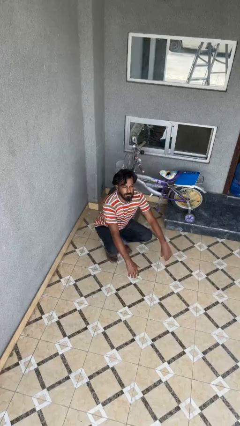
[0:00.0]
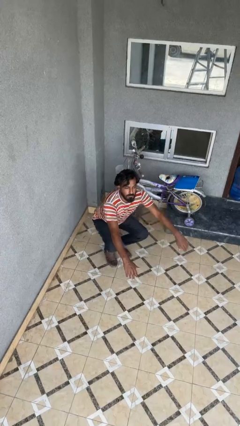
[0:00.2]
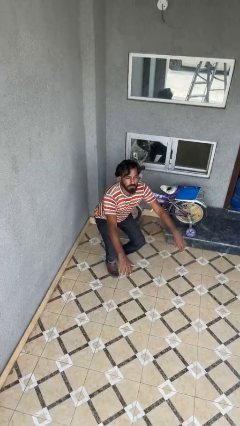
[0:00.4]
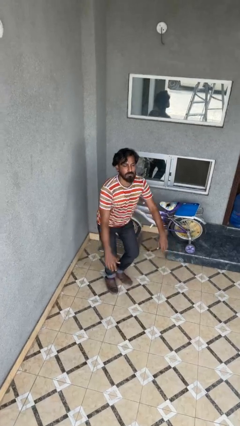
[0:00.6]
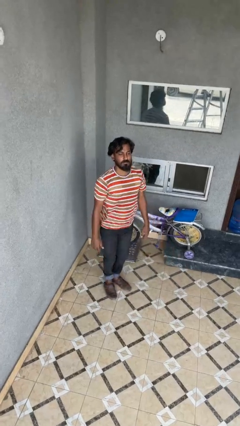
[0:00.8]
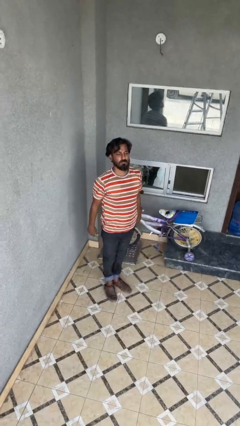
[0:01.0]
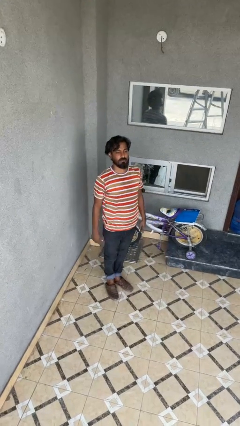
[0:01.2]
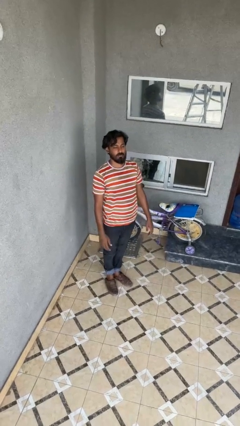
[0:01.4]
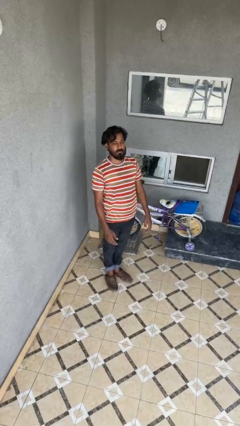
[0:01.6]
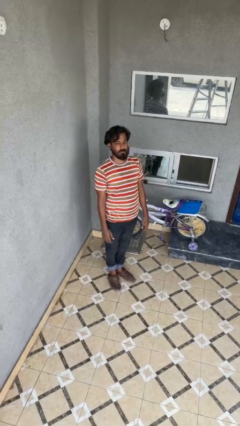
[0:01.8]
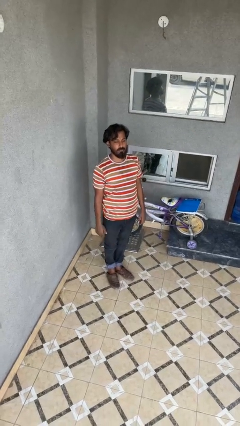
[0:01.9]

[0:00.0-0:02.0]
person stands up

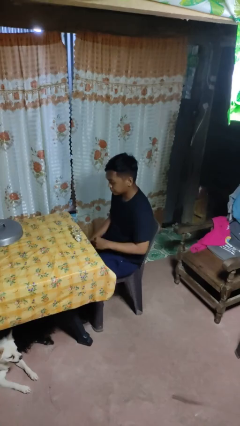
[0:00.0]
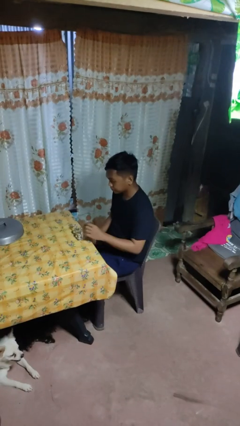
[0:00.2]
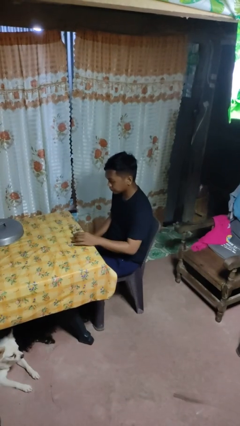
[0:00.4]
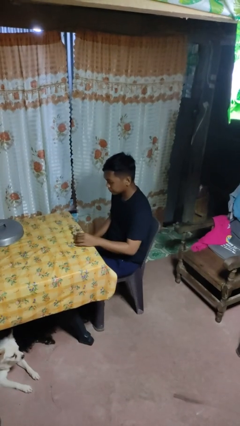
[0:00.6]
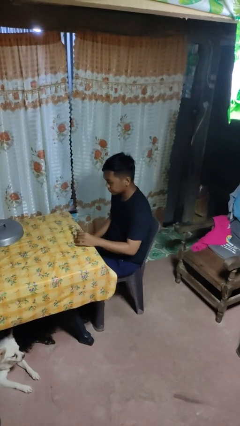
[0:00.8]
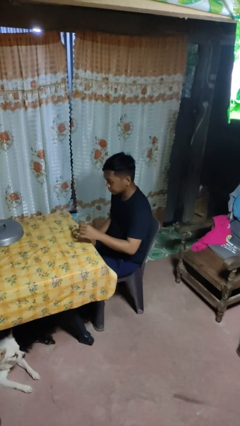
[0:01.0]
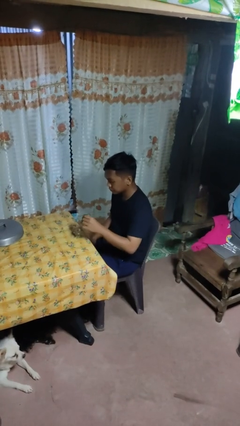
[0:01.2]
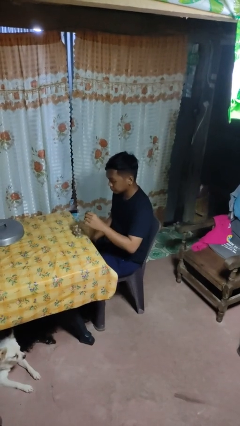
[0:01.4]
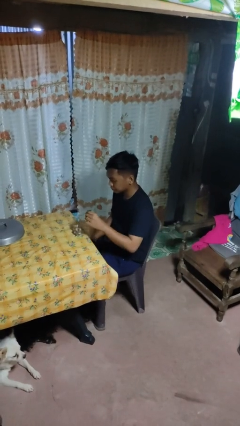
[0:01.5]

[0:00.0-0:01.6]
person picks up object from table

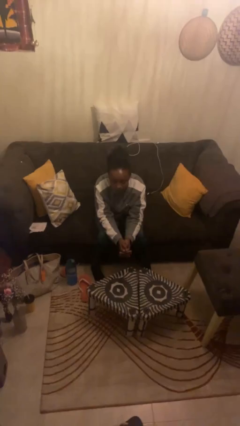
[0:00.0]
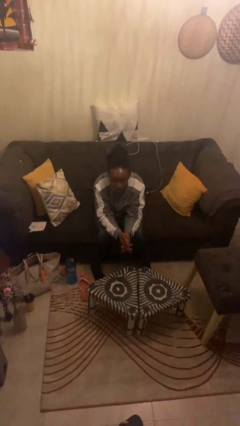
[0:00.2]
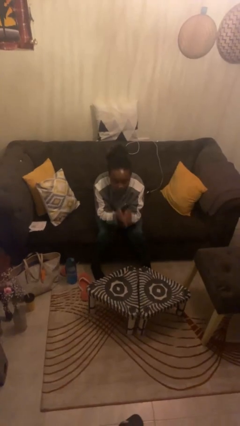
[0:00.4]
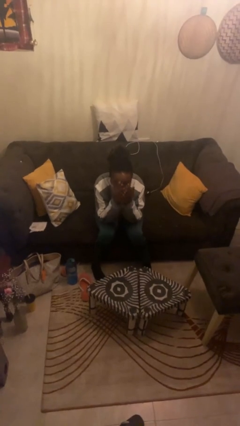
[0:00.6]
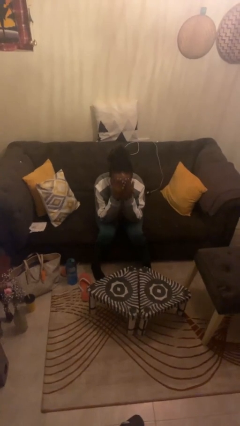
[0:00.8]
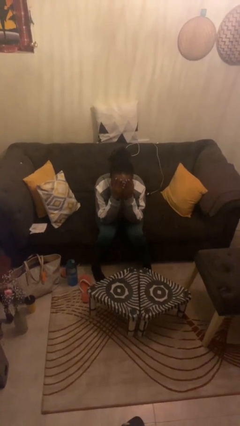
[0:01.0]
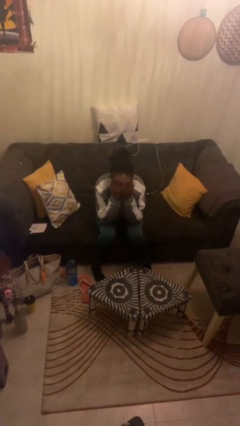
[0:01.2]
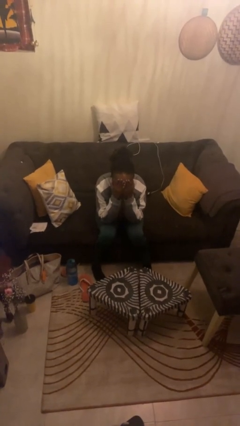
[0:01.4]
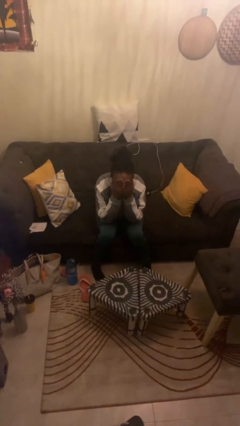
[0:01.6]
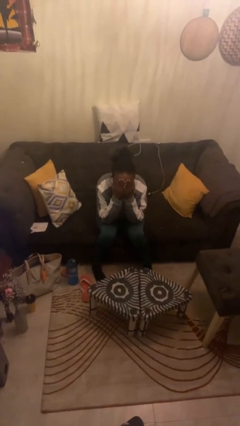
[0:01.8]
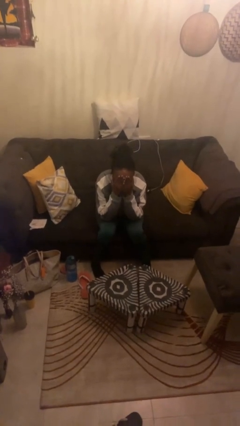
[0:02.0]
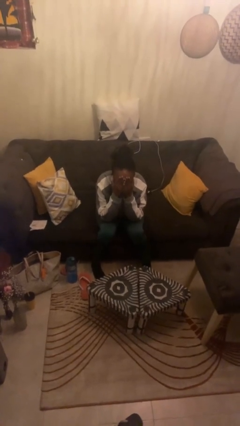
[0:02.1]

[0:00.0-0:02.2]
person covers face with hands

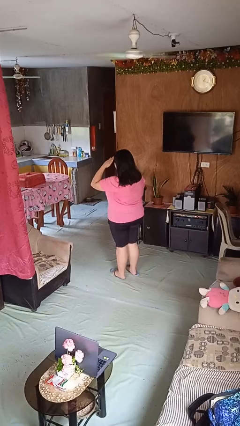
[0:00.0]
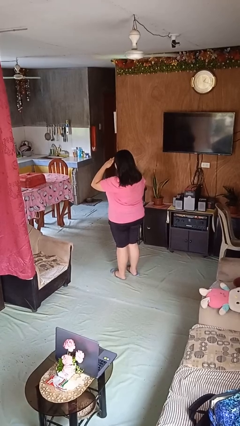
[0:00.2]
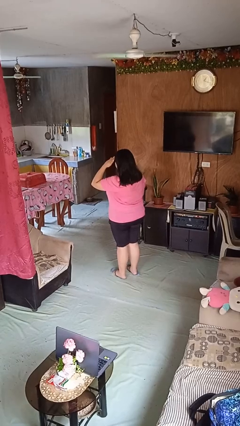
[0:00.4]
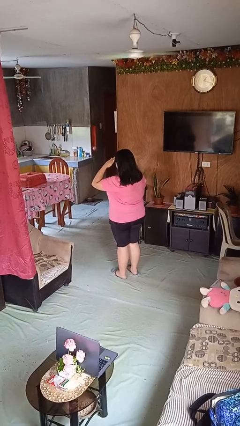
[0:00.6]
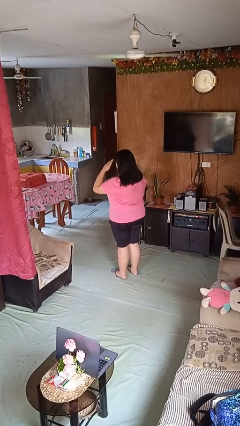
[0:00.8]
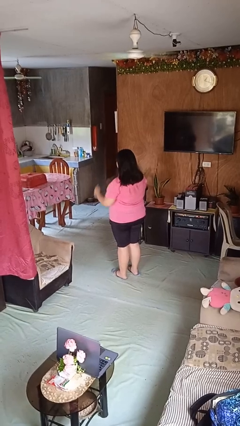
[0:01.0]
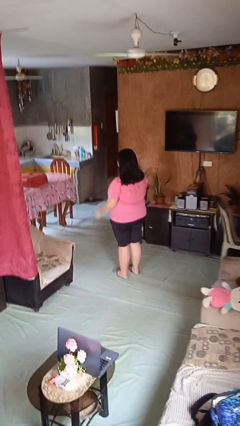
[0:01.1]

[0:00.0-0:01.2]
person salutes

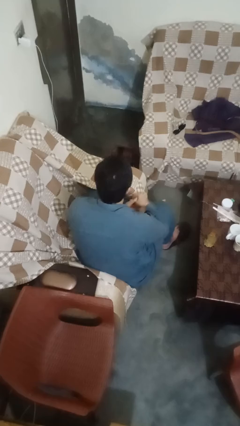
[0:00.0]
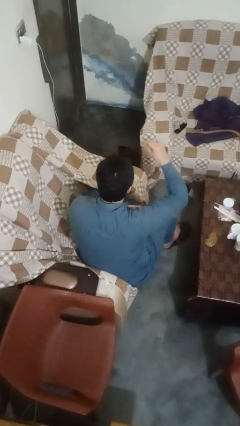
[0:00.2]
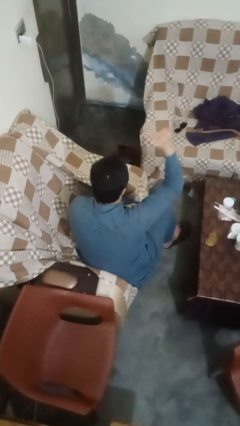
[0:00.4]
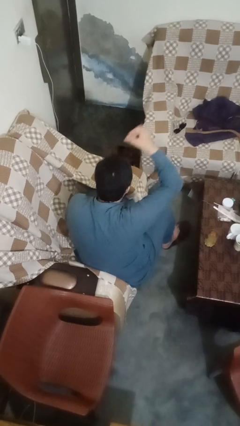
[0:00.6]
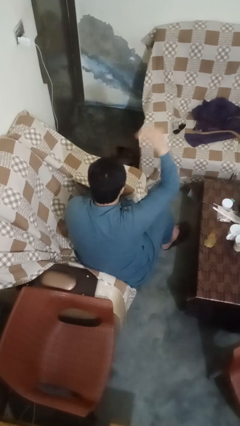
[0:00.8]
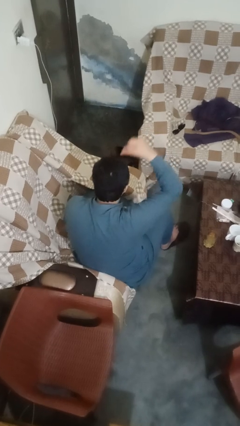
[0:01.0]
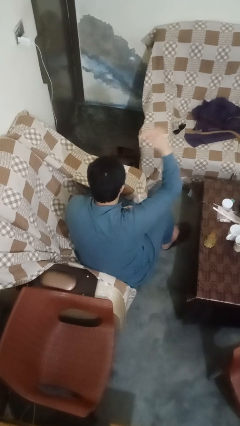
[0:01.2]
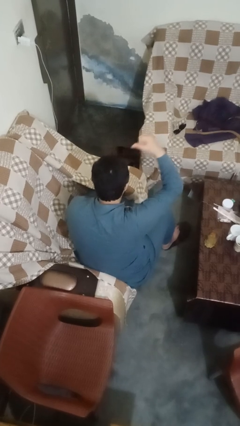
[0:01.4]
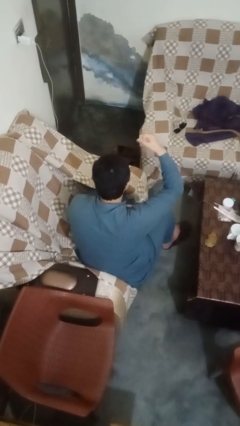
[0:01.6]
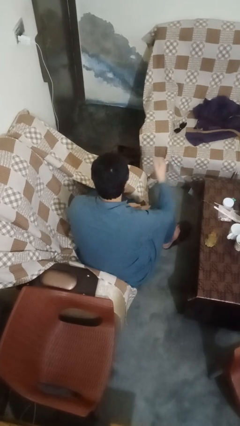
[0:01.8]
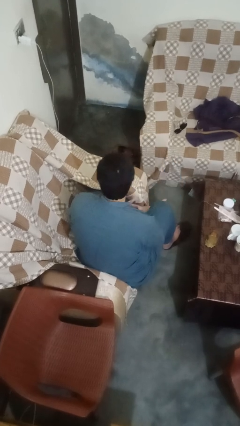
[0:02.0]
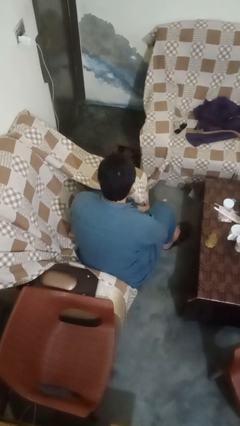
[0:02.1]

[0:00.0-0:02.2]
person snaps fingers

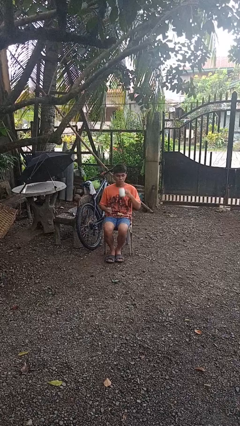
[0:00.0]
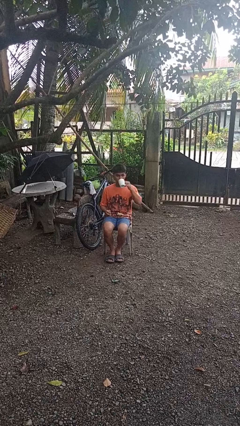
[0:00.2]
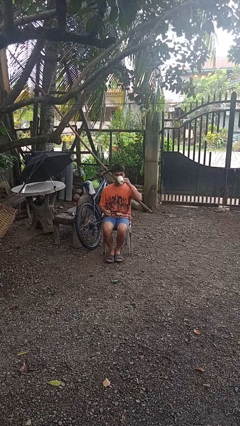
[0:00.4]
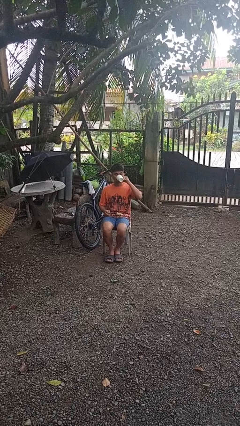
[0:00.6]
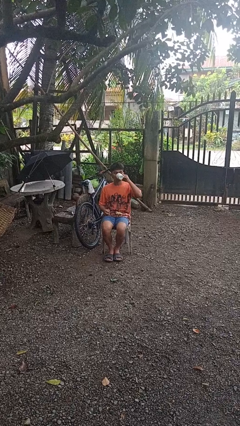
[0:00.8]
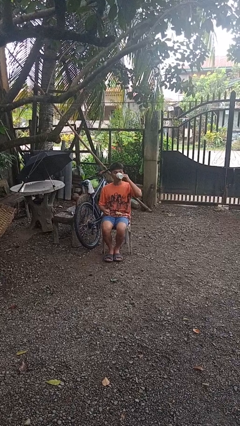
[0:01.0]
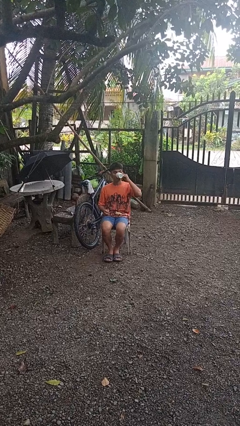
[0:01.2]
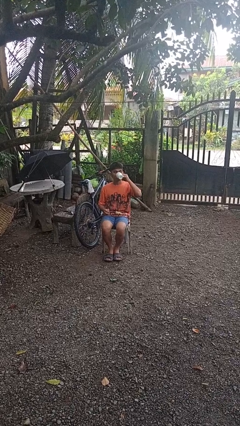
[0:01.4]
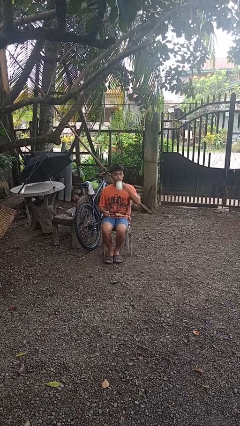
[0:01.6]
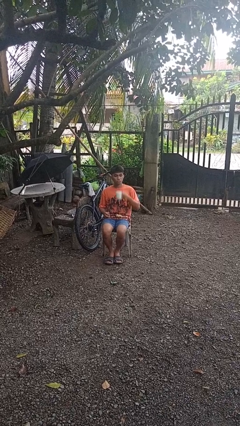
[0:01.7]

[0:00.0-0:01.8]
person drinks from mug

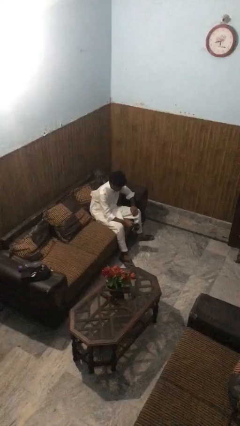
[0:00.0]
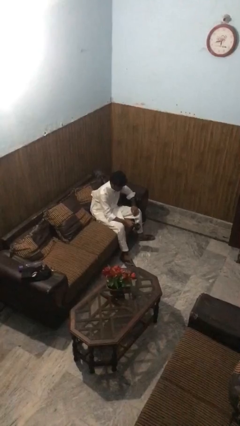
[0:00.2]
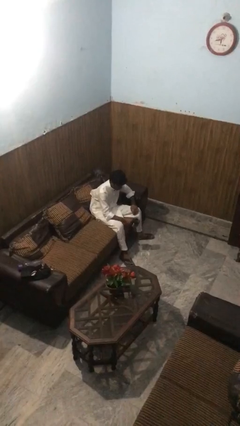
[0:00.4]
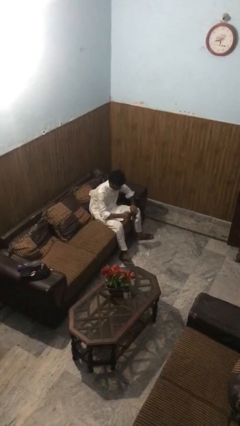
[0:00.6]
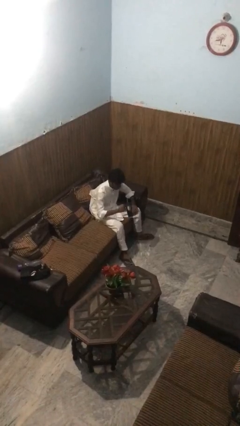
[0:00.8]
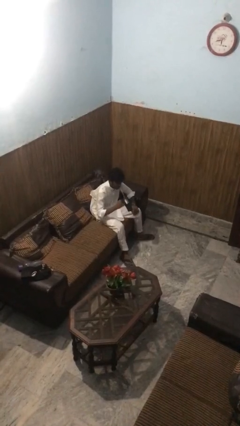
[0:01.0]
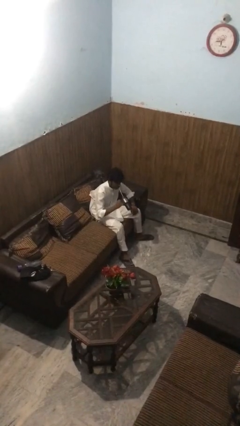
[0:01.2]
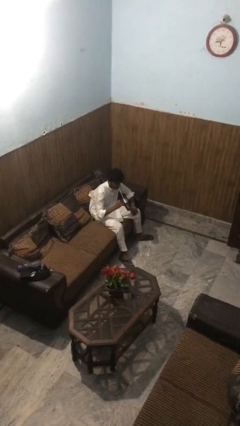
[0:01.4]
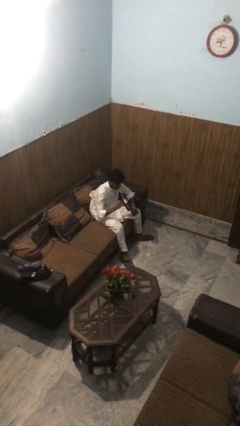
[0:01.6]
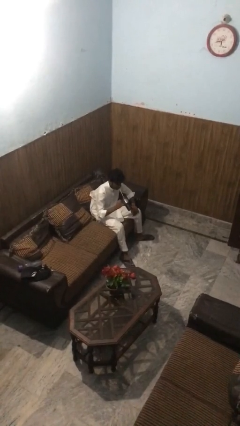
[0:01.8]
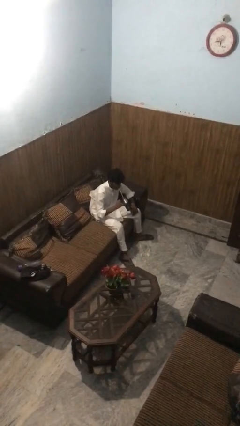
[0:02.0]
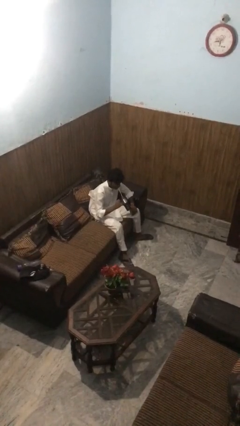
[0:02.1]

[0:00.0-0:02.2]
person drinks from straw

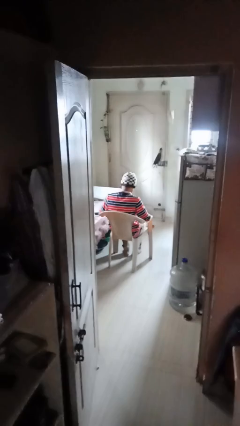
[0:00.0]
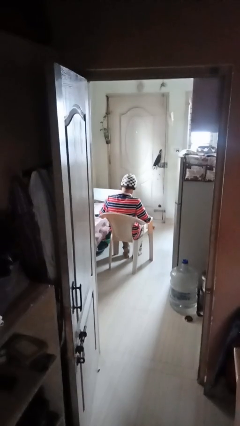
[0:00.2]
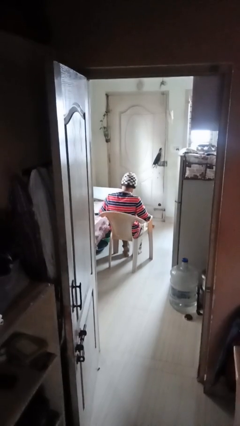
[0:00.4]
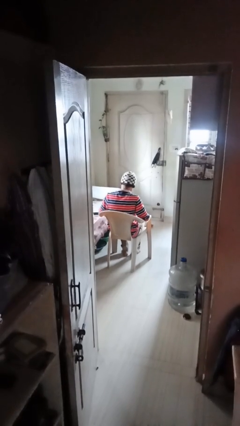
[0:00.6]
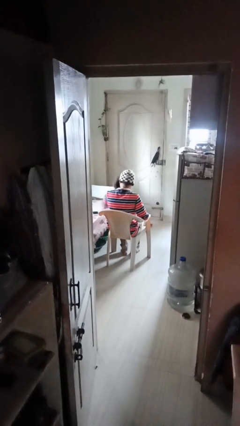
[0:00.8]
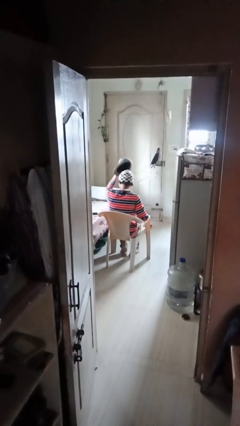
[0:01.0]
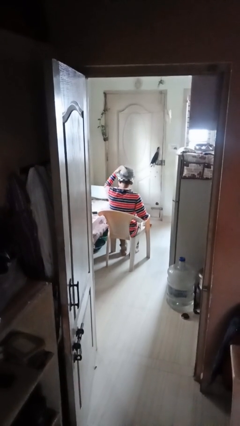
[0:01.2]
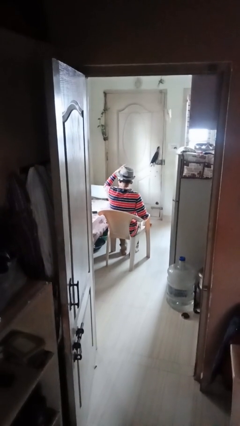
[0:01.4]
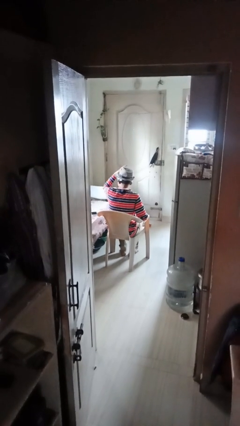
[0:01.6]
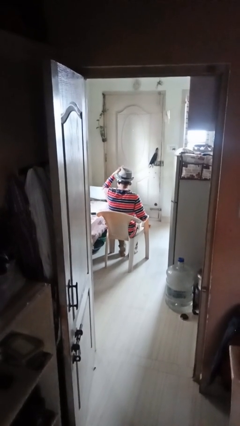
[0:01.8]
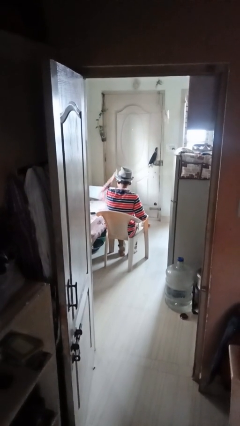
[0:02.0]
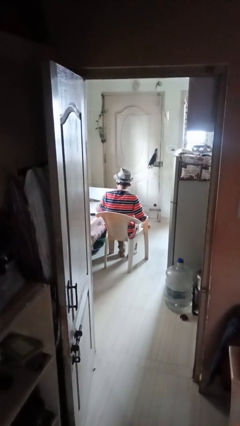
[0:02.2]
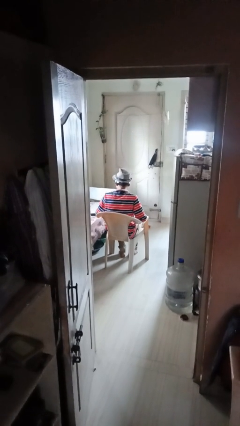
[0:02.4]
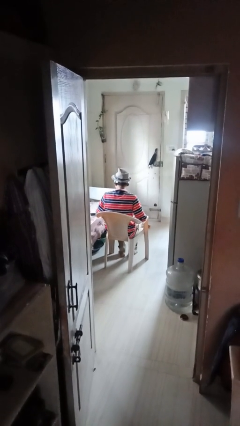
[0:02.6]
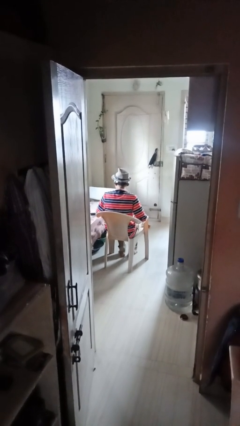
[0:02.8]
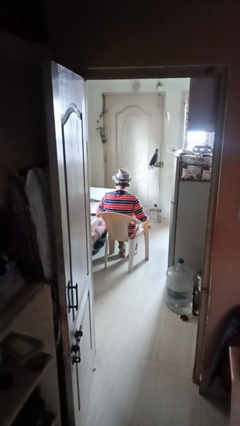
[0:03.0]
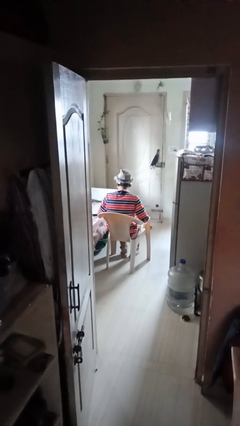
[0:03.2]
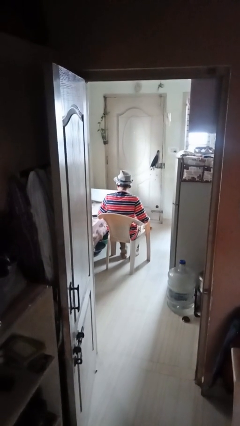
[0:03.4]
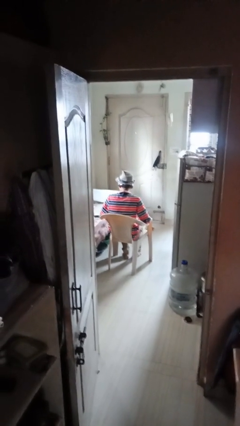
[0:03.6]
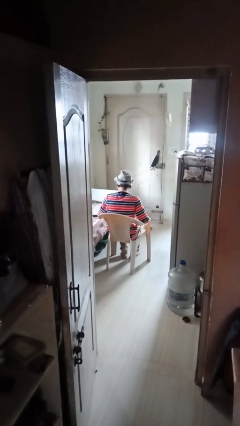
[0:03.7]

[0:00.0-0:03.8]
person puts on hat
